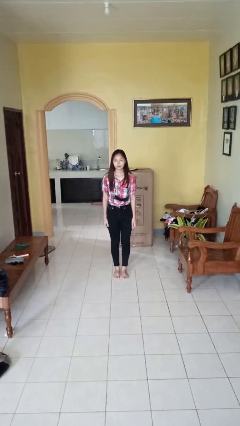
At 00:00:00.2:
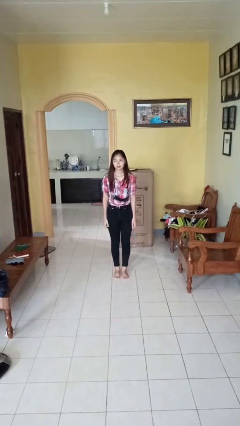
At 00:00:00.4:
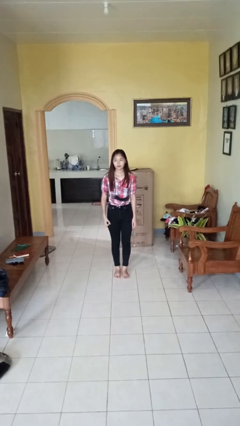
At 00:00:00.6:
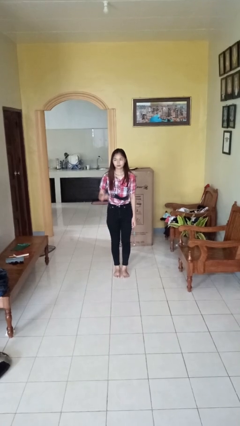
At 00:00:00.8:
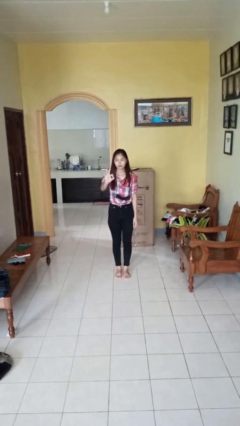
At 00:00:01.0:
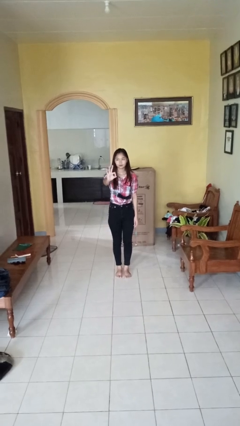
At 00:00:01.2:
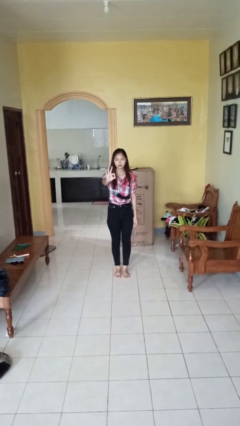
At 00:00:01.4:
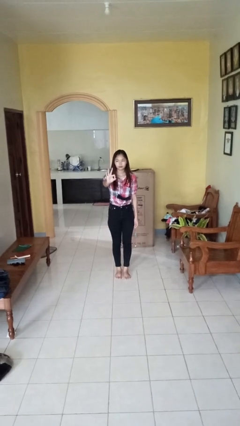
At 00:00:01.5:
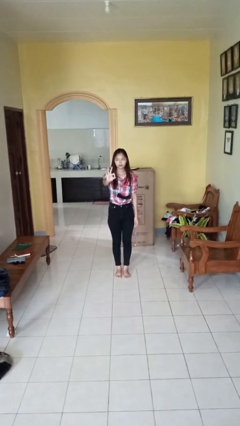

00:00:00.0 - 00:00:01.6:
person gestures number three

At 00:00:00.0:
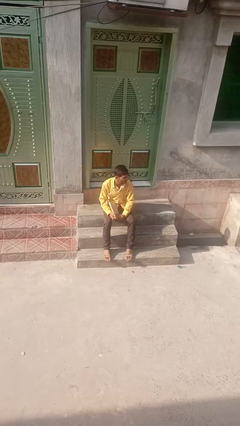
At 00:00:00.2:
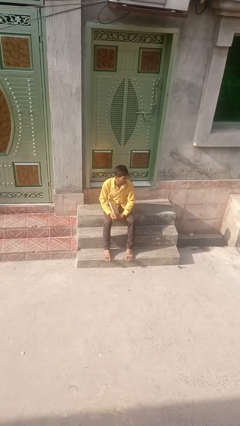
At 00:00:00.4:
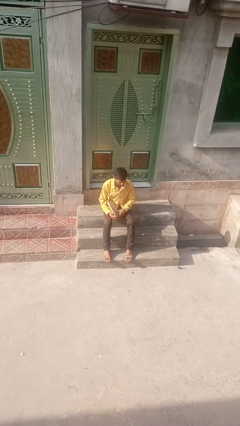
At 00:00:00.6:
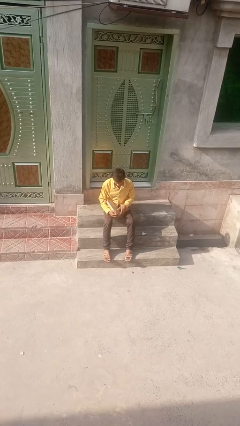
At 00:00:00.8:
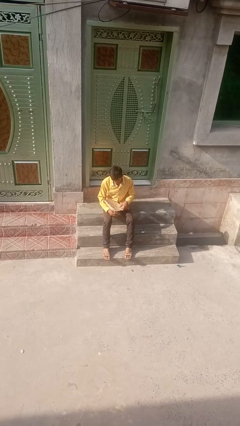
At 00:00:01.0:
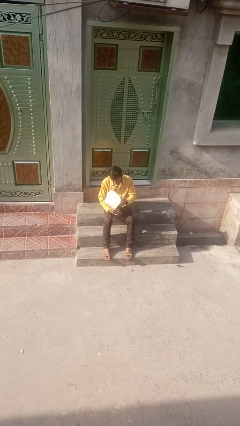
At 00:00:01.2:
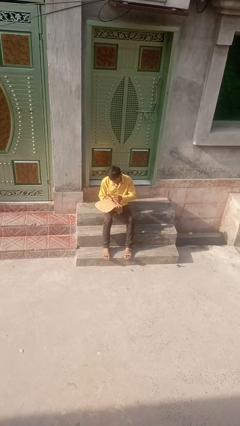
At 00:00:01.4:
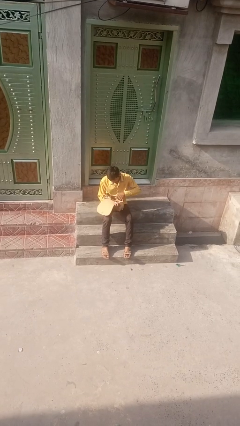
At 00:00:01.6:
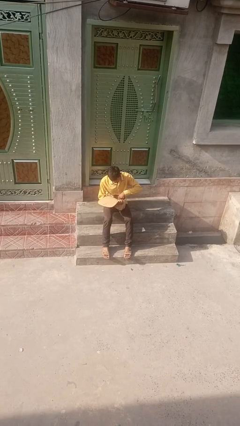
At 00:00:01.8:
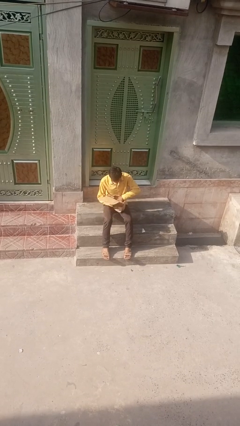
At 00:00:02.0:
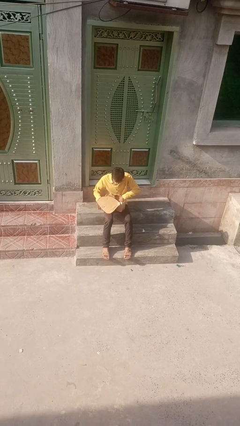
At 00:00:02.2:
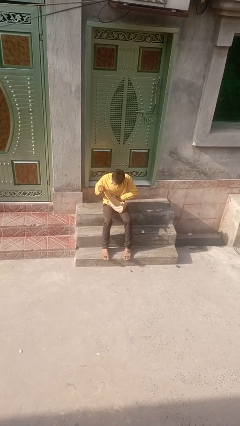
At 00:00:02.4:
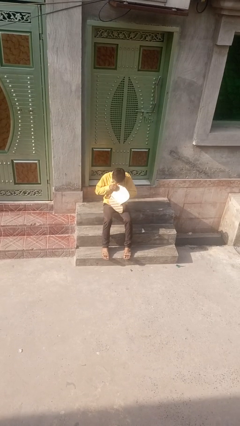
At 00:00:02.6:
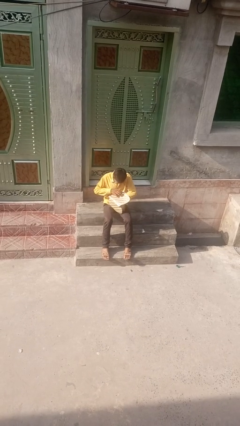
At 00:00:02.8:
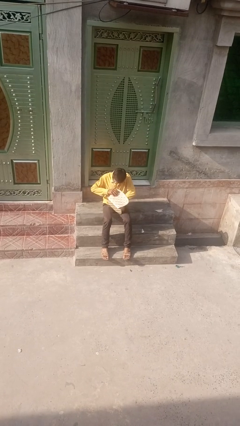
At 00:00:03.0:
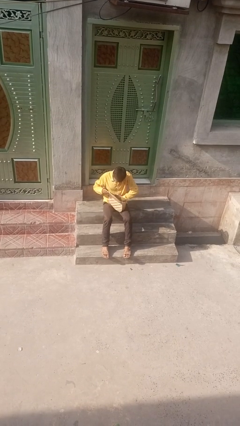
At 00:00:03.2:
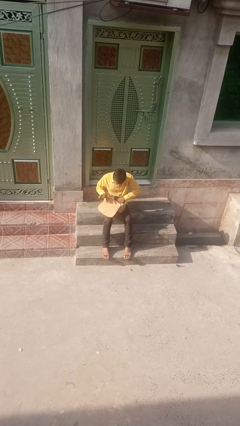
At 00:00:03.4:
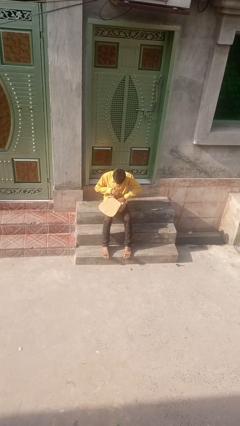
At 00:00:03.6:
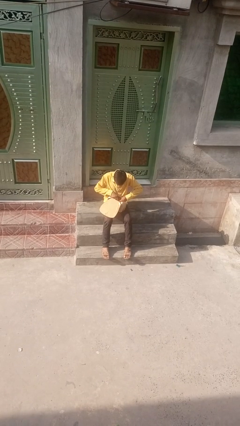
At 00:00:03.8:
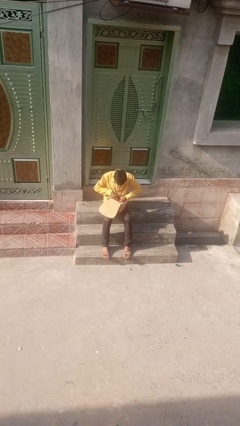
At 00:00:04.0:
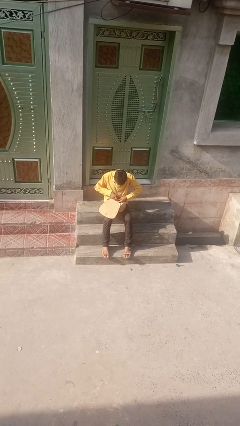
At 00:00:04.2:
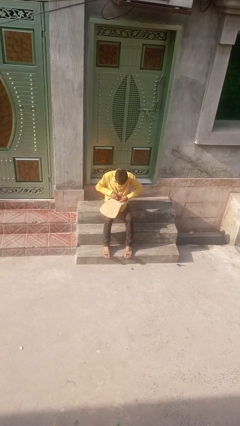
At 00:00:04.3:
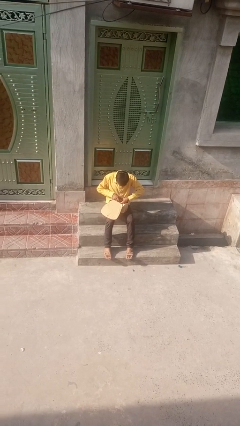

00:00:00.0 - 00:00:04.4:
person searches in backpack

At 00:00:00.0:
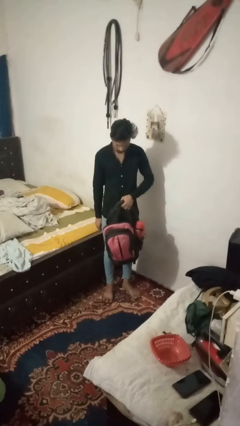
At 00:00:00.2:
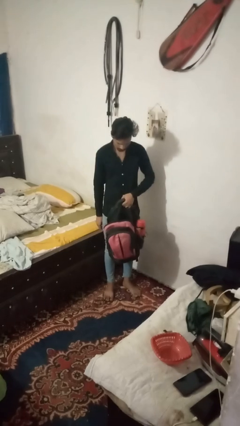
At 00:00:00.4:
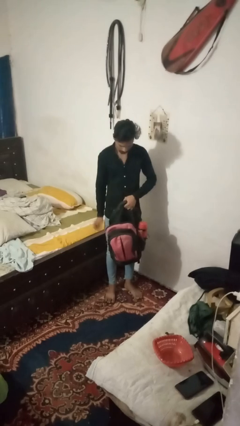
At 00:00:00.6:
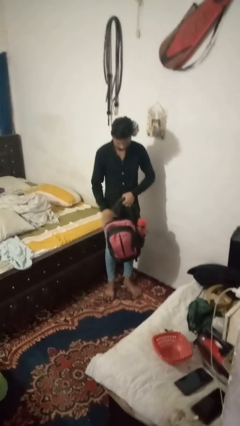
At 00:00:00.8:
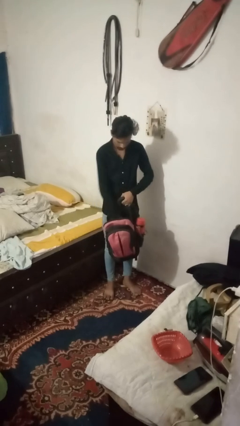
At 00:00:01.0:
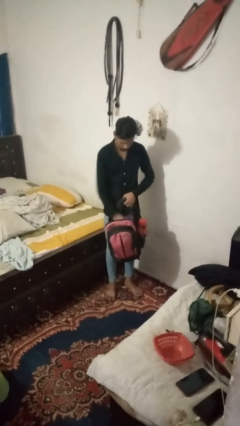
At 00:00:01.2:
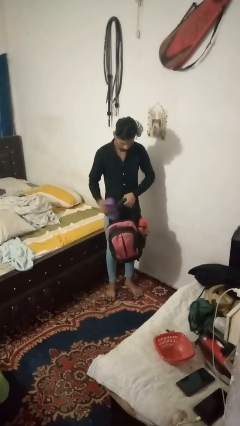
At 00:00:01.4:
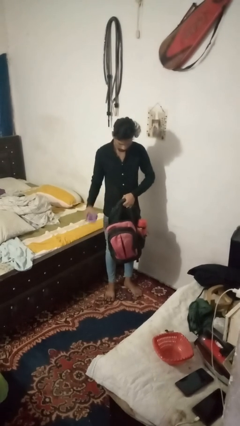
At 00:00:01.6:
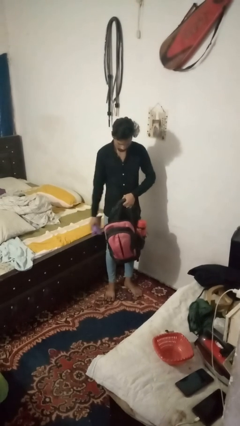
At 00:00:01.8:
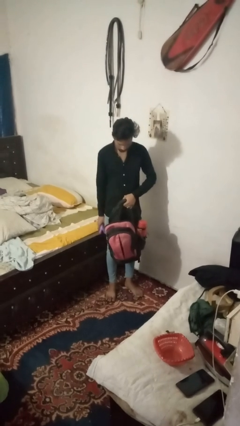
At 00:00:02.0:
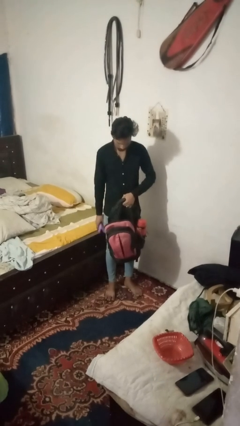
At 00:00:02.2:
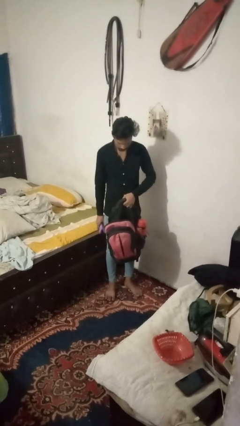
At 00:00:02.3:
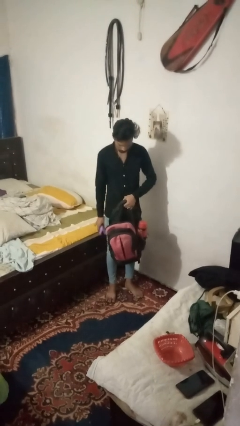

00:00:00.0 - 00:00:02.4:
person takes object from bag

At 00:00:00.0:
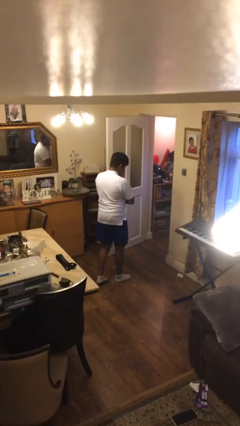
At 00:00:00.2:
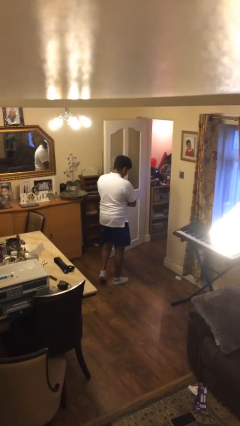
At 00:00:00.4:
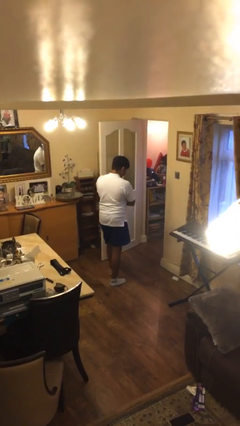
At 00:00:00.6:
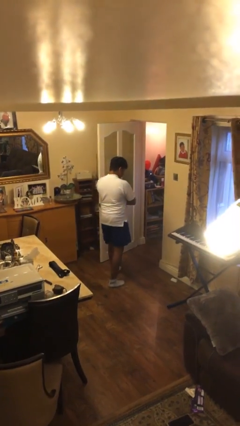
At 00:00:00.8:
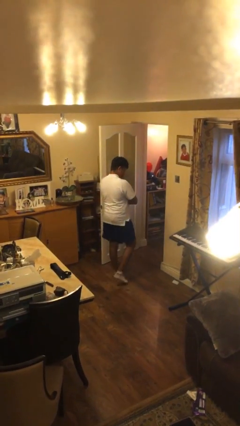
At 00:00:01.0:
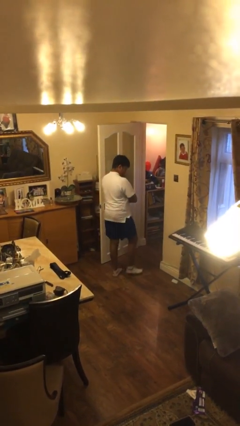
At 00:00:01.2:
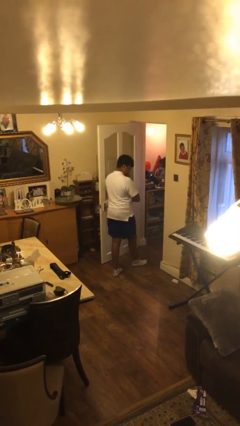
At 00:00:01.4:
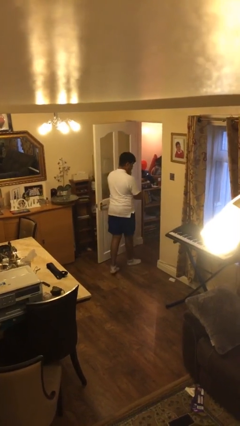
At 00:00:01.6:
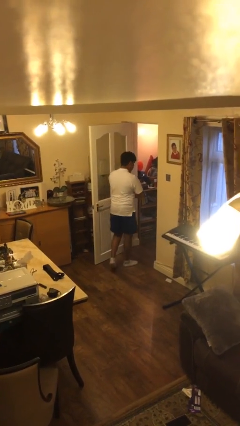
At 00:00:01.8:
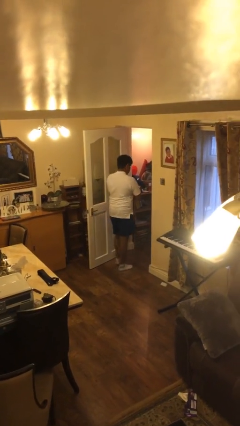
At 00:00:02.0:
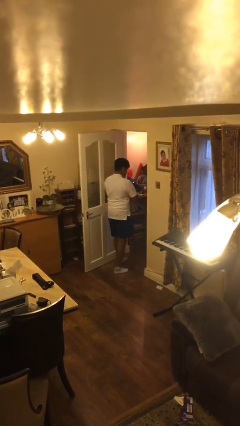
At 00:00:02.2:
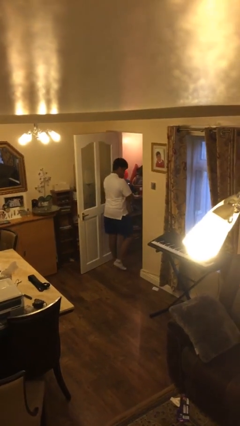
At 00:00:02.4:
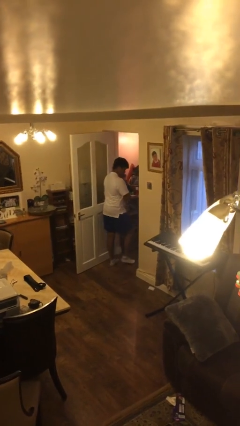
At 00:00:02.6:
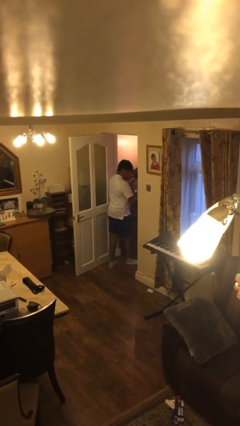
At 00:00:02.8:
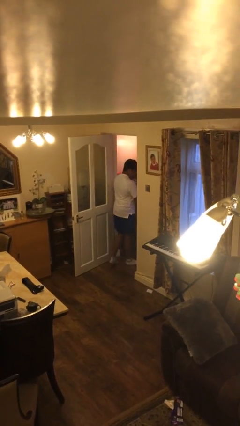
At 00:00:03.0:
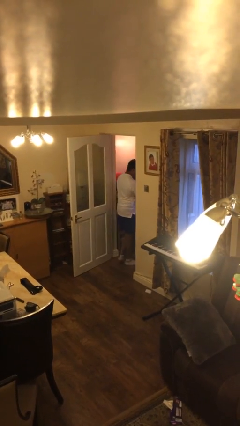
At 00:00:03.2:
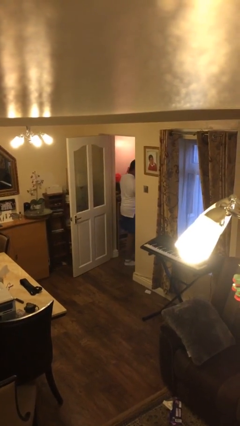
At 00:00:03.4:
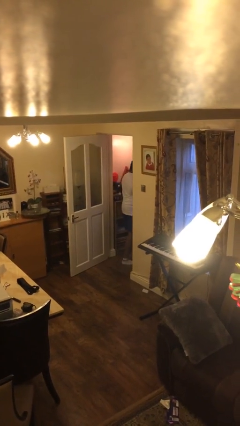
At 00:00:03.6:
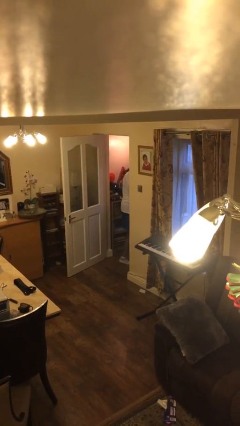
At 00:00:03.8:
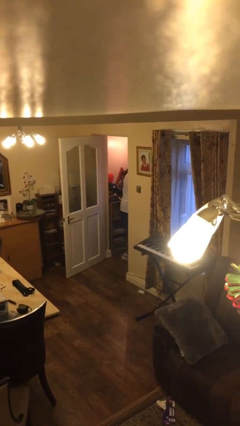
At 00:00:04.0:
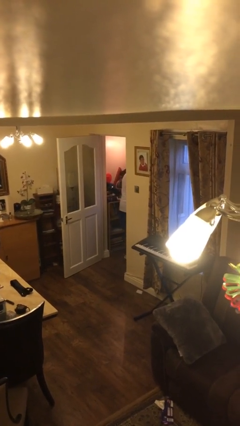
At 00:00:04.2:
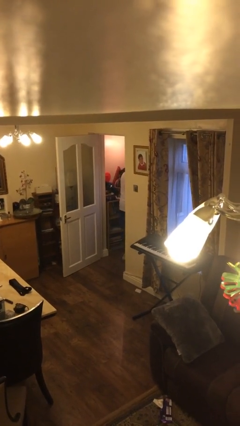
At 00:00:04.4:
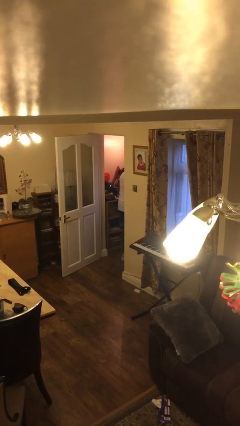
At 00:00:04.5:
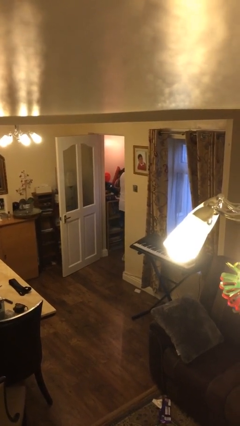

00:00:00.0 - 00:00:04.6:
person exits scene through structure

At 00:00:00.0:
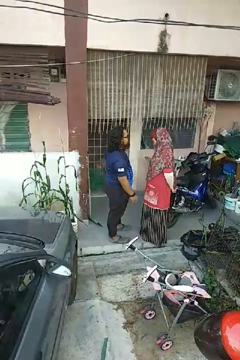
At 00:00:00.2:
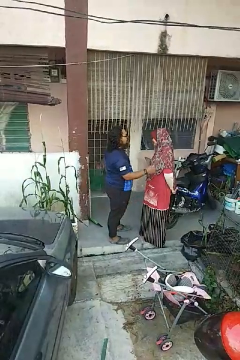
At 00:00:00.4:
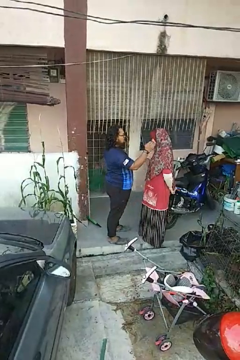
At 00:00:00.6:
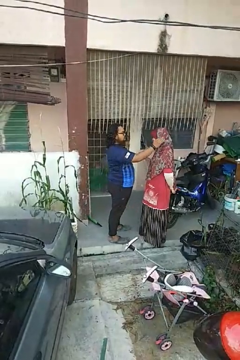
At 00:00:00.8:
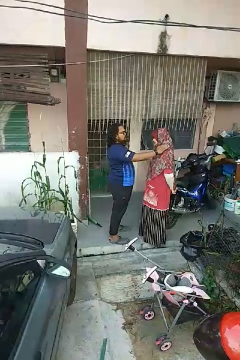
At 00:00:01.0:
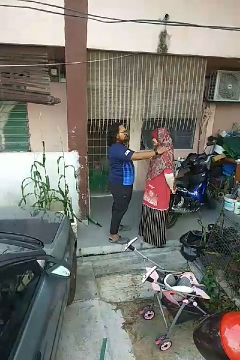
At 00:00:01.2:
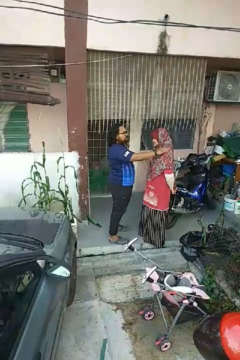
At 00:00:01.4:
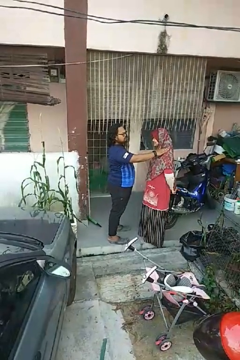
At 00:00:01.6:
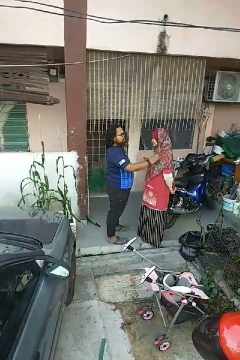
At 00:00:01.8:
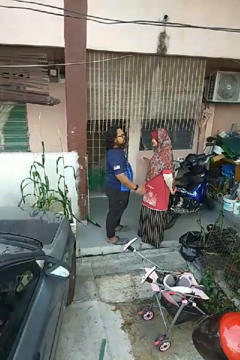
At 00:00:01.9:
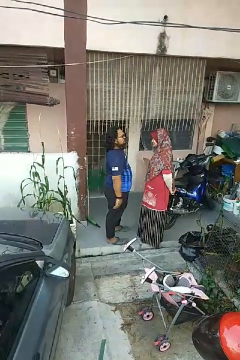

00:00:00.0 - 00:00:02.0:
person pounds shoulders of person

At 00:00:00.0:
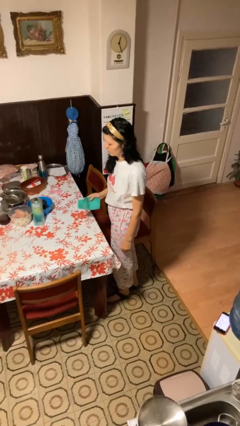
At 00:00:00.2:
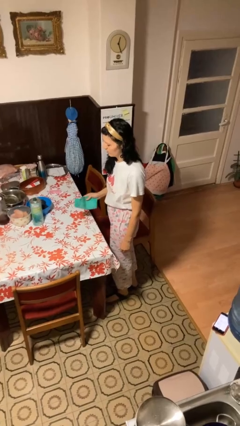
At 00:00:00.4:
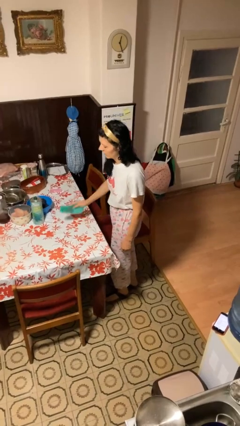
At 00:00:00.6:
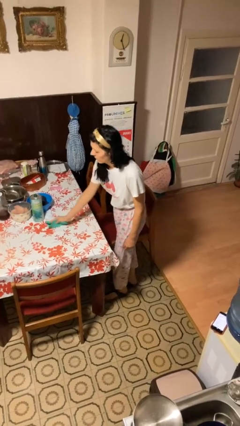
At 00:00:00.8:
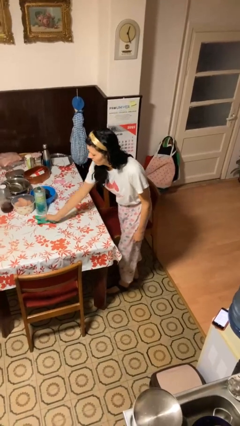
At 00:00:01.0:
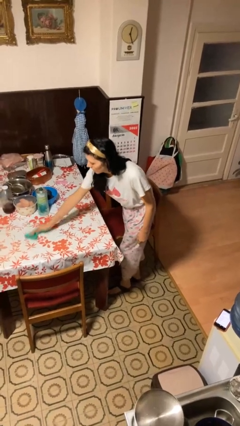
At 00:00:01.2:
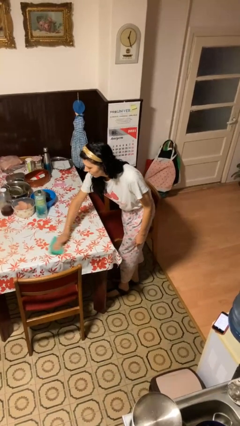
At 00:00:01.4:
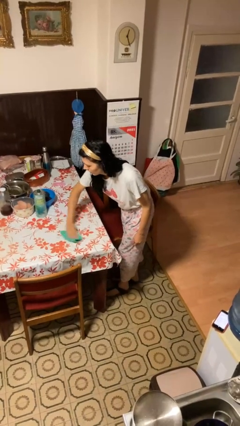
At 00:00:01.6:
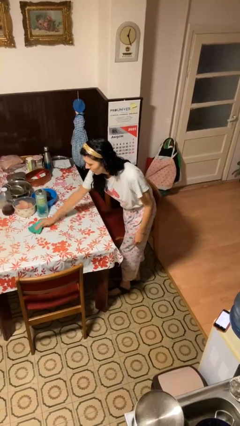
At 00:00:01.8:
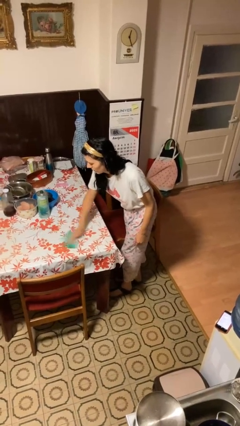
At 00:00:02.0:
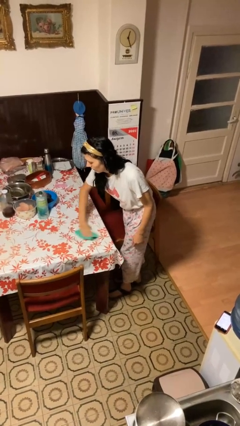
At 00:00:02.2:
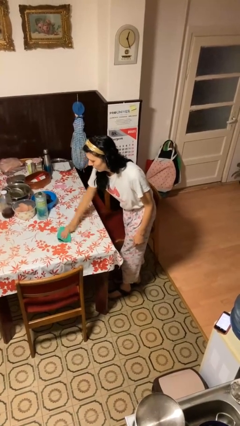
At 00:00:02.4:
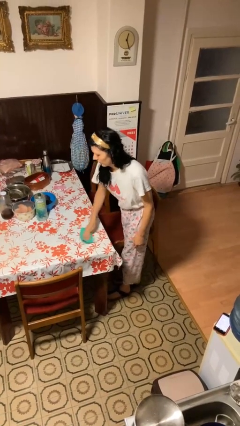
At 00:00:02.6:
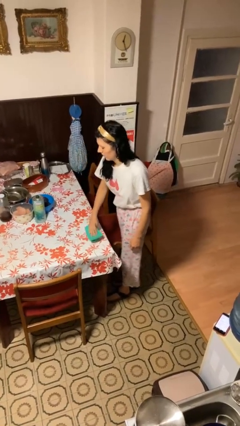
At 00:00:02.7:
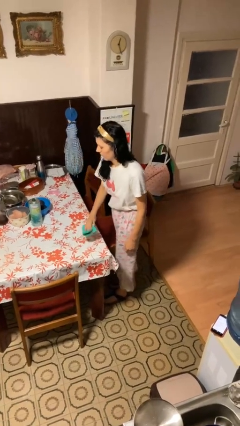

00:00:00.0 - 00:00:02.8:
person cleans table with rag
